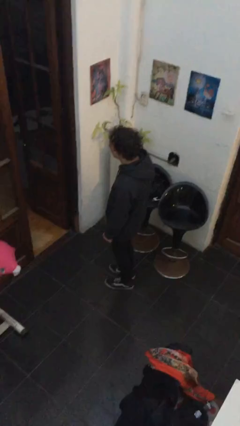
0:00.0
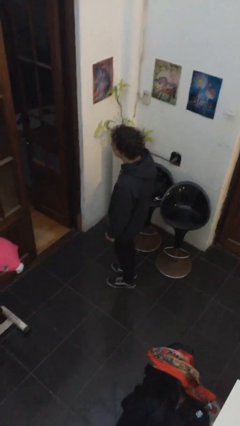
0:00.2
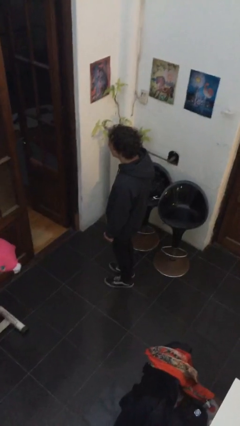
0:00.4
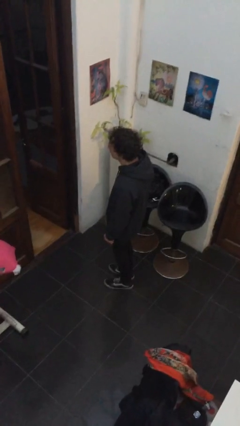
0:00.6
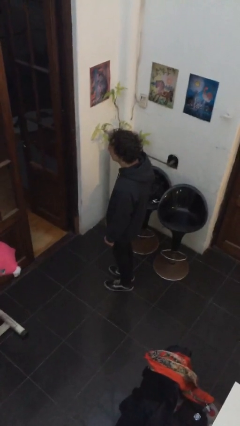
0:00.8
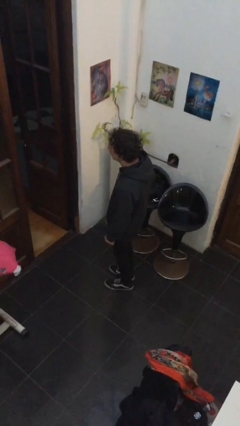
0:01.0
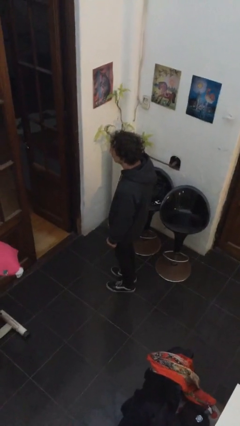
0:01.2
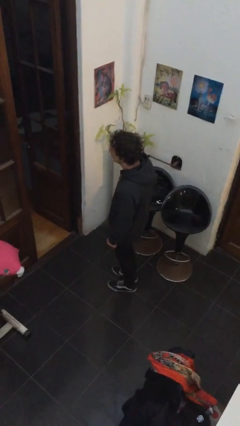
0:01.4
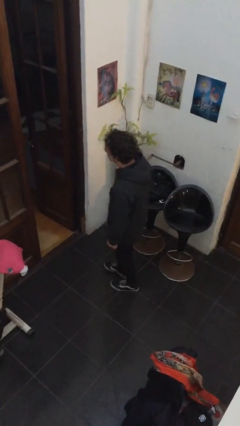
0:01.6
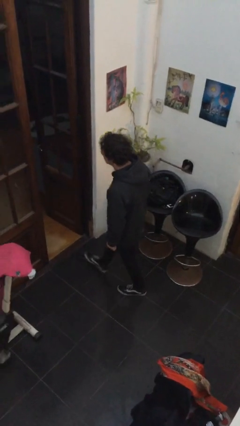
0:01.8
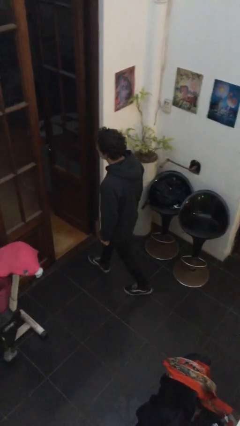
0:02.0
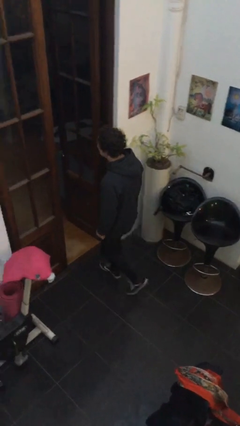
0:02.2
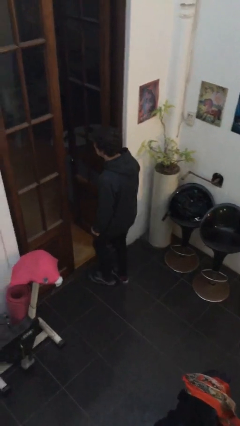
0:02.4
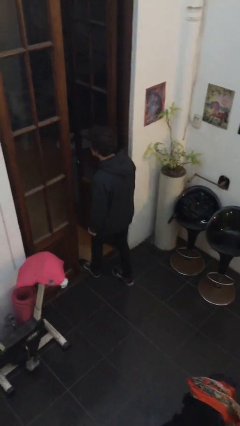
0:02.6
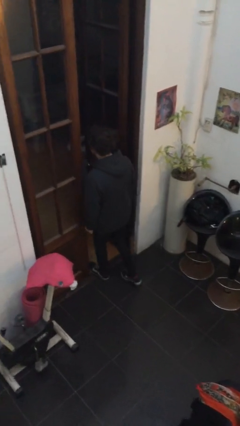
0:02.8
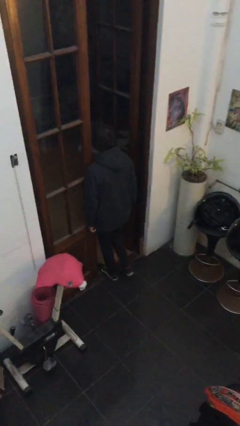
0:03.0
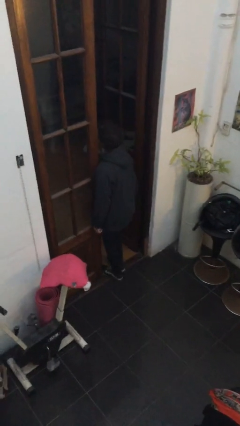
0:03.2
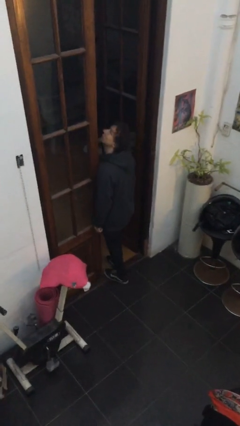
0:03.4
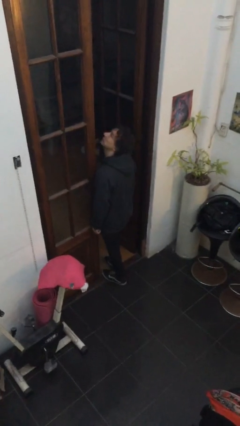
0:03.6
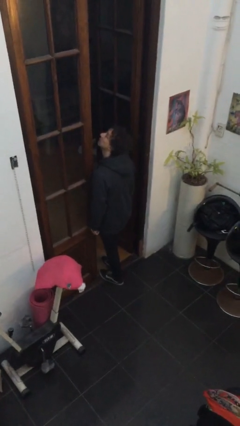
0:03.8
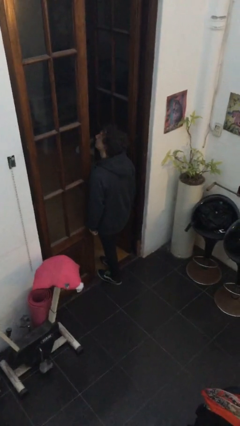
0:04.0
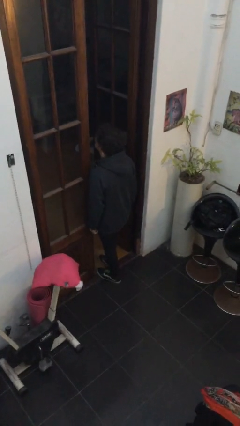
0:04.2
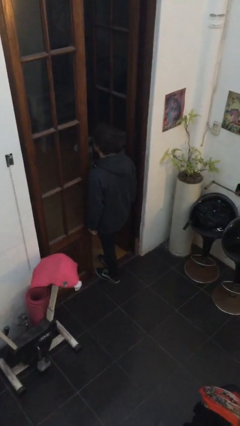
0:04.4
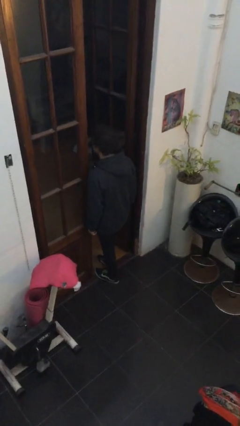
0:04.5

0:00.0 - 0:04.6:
person bumps into wall

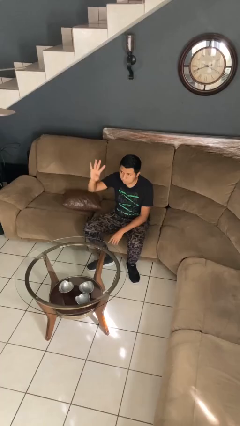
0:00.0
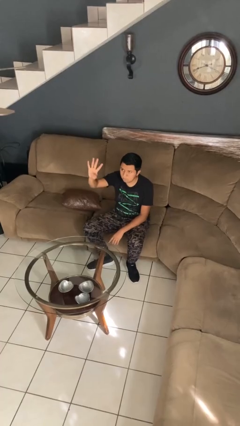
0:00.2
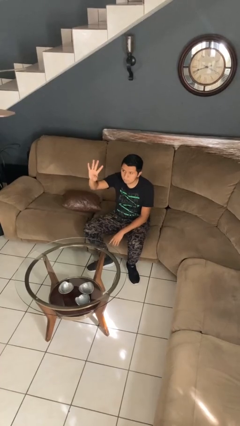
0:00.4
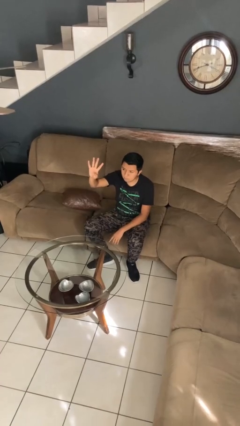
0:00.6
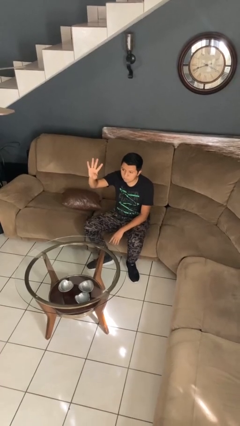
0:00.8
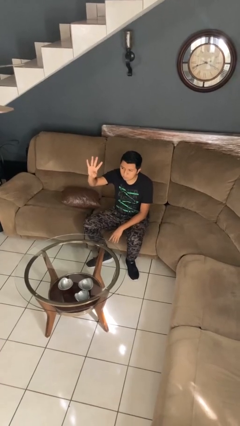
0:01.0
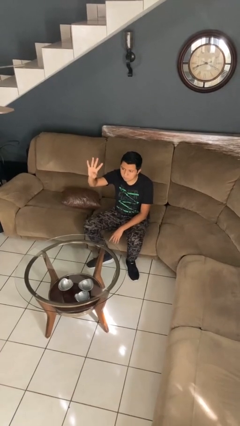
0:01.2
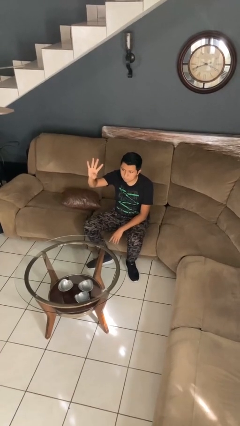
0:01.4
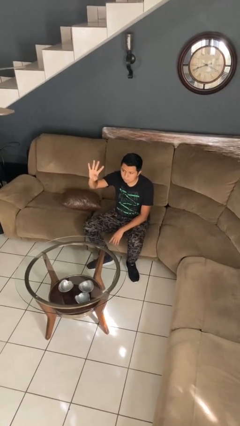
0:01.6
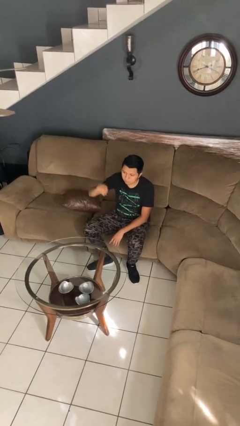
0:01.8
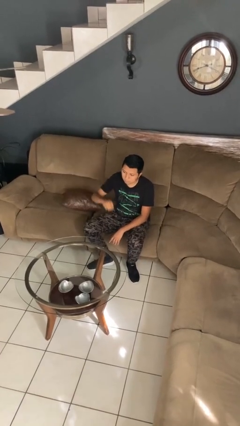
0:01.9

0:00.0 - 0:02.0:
person gestures number four

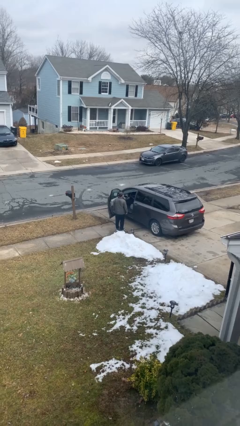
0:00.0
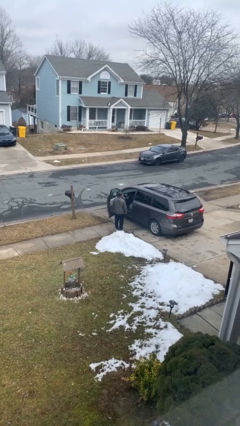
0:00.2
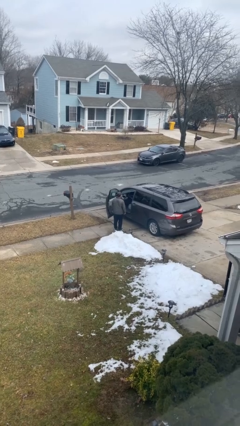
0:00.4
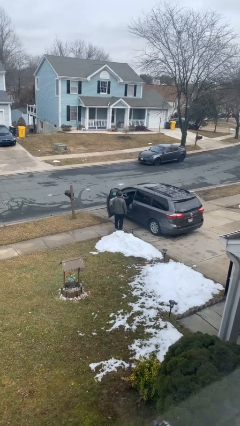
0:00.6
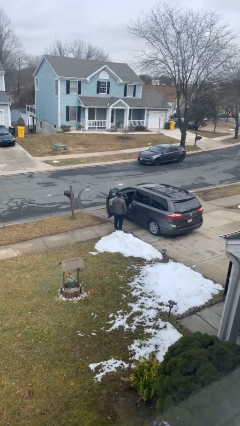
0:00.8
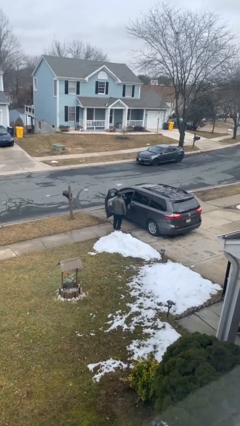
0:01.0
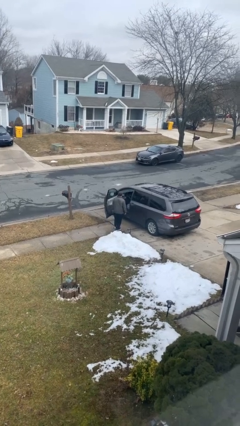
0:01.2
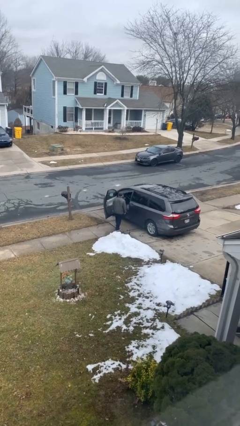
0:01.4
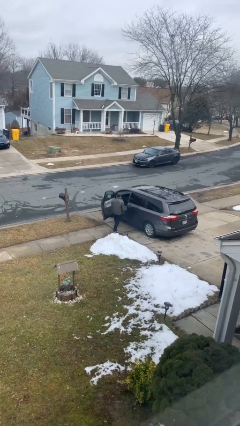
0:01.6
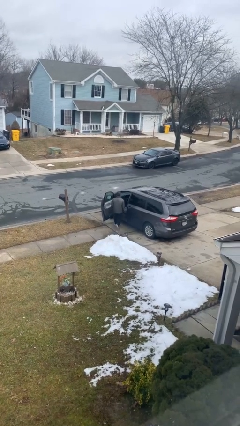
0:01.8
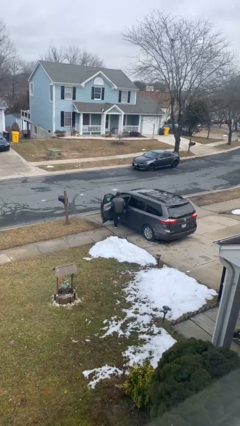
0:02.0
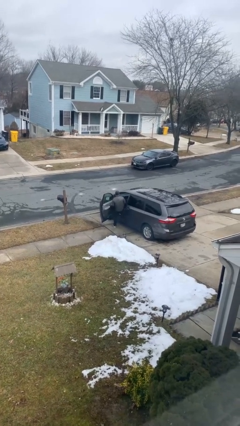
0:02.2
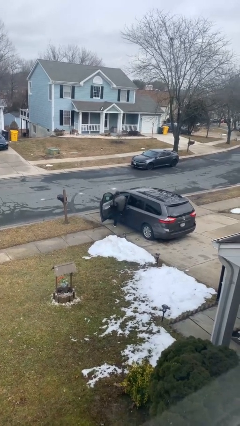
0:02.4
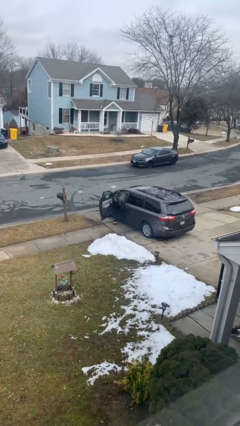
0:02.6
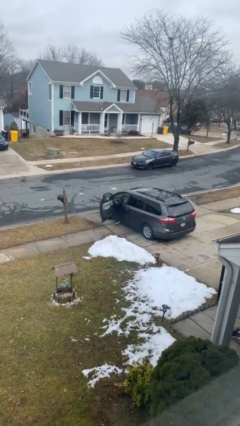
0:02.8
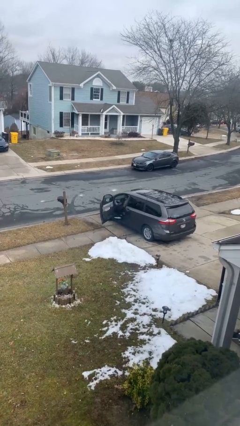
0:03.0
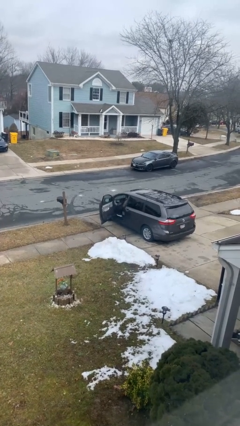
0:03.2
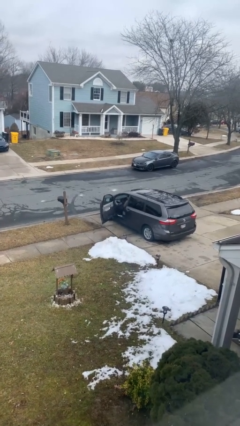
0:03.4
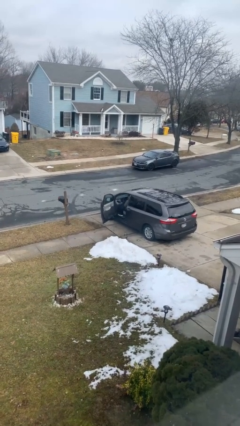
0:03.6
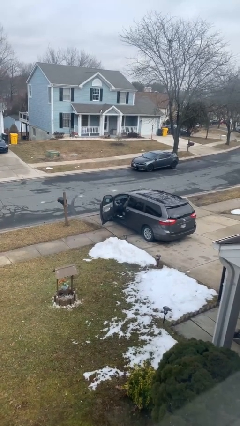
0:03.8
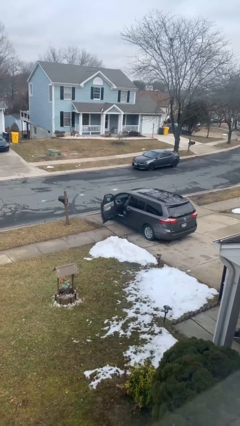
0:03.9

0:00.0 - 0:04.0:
person enters car

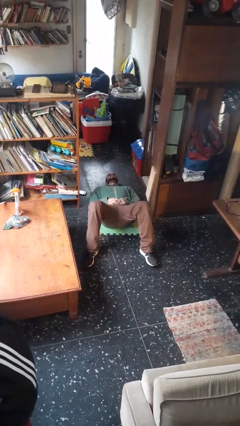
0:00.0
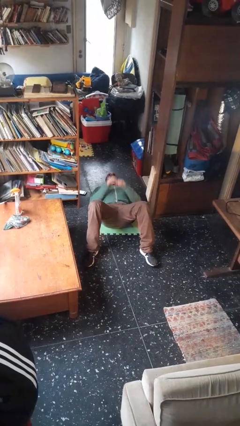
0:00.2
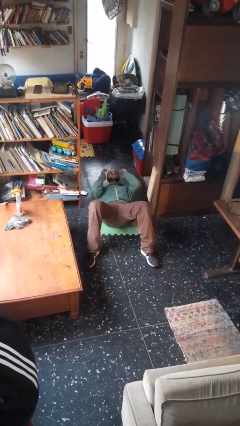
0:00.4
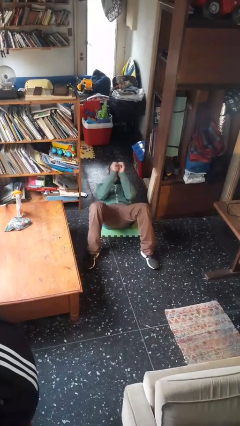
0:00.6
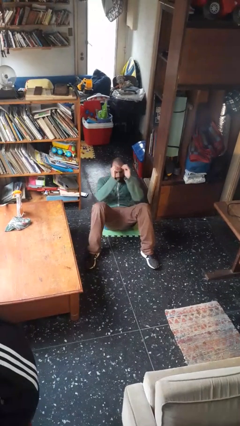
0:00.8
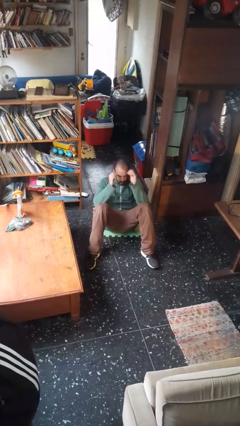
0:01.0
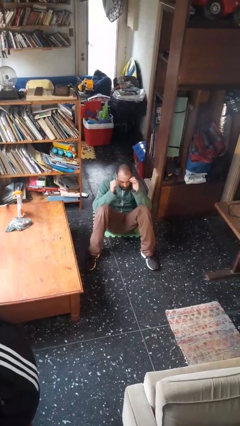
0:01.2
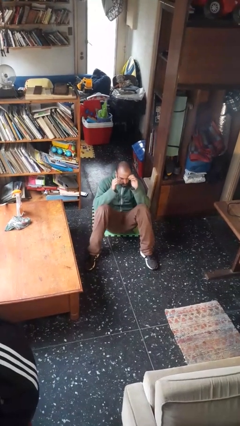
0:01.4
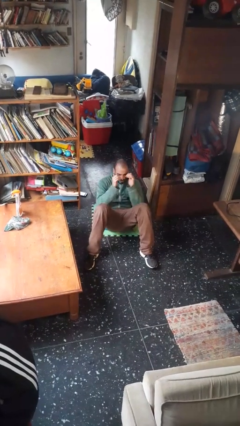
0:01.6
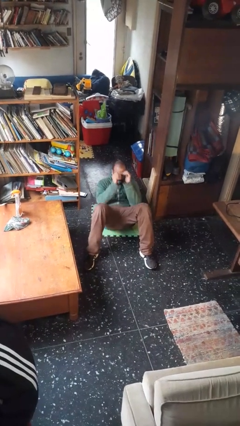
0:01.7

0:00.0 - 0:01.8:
person exercises with situp

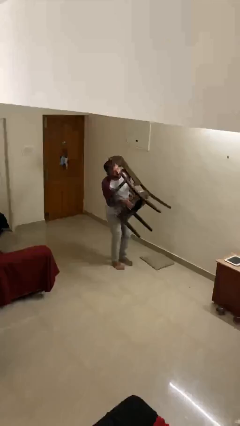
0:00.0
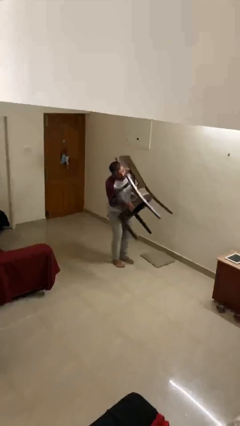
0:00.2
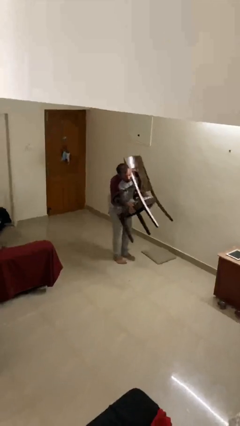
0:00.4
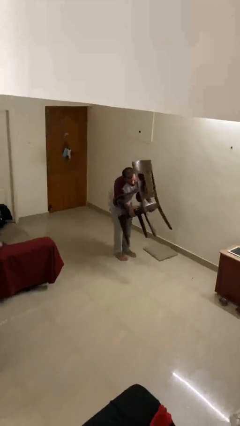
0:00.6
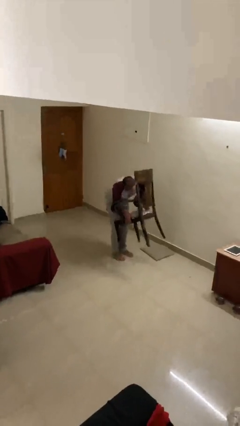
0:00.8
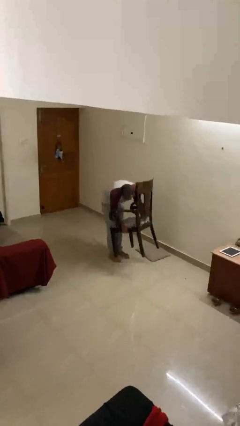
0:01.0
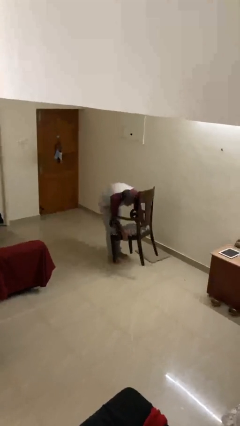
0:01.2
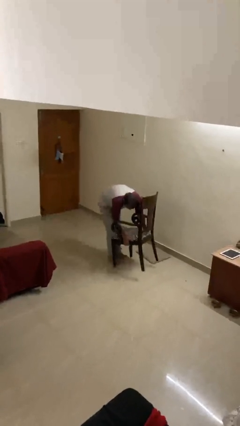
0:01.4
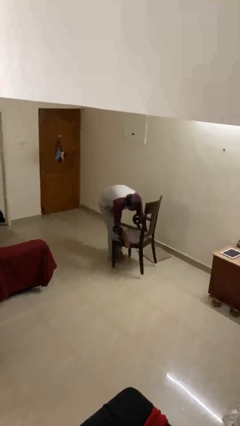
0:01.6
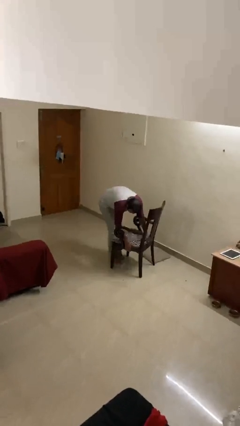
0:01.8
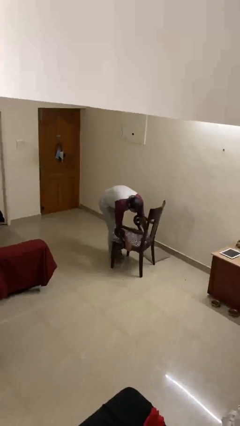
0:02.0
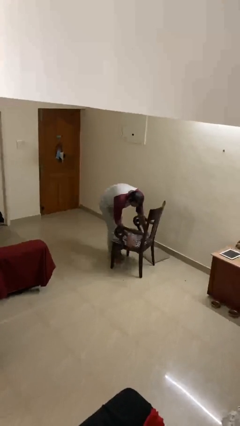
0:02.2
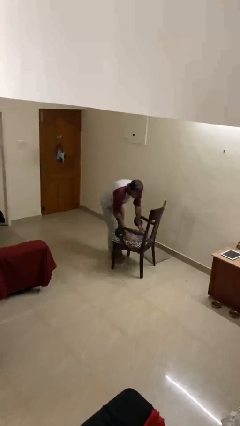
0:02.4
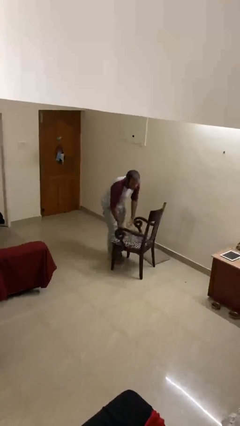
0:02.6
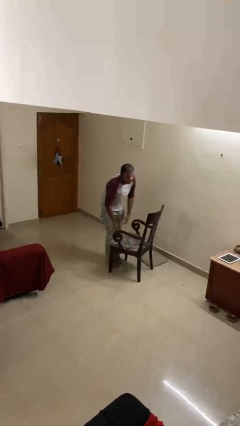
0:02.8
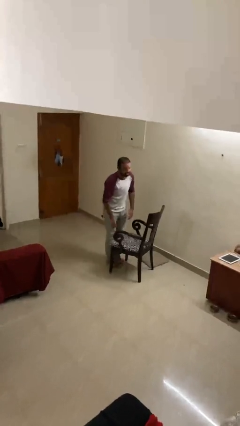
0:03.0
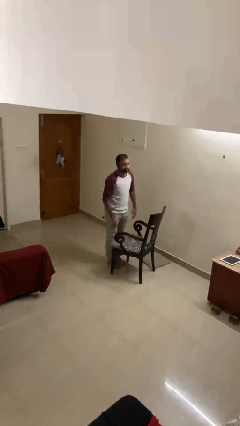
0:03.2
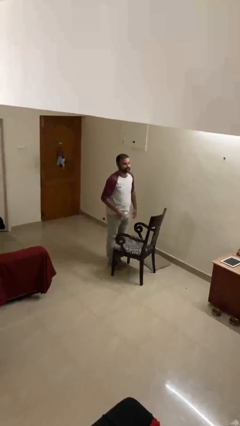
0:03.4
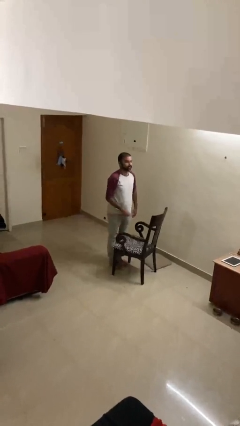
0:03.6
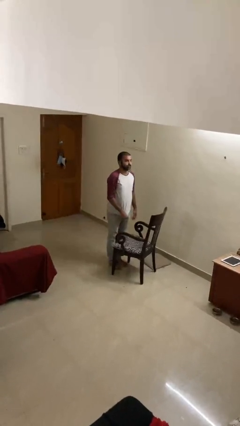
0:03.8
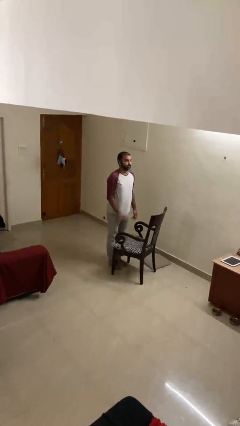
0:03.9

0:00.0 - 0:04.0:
person puts down object on floor

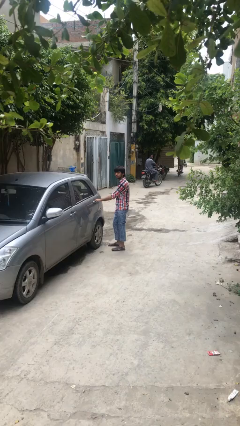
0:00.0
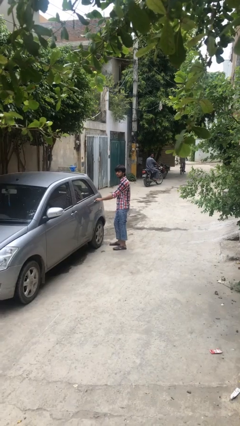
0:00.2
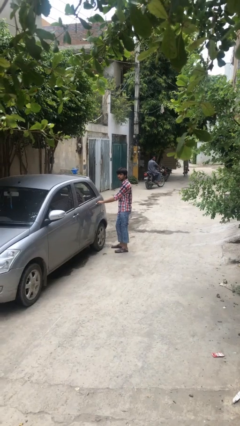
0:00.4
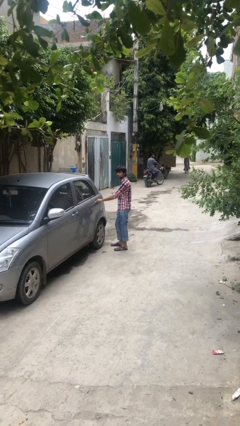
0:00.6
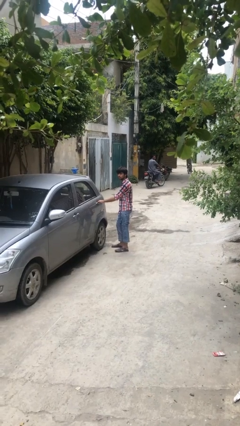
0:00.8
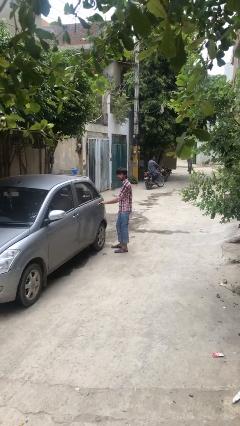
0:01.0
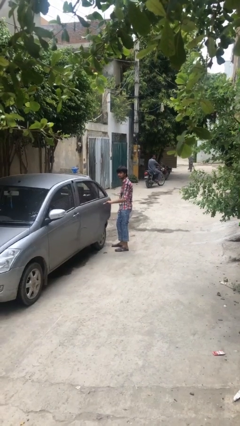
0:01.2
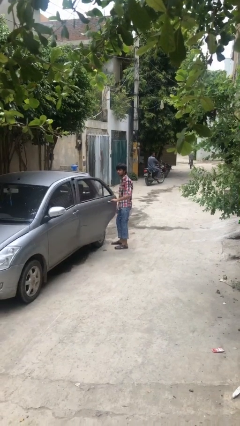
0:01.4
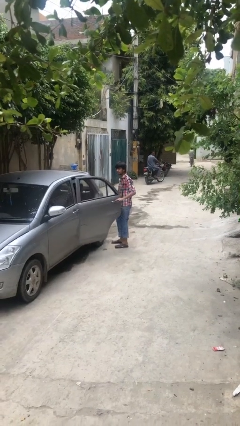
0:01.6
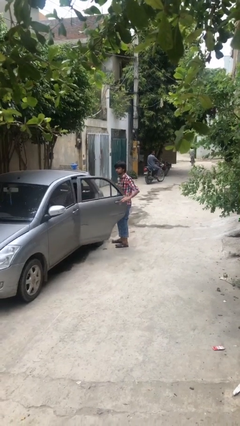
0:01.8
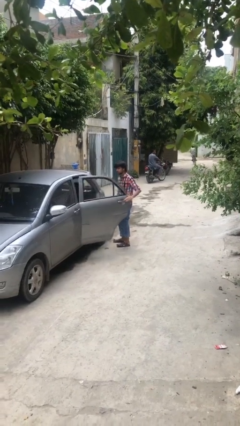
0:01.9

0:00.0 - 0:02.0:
person opens car door
